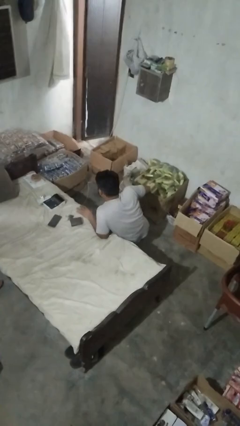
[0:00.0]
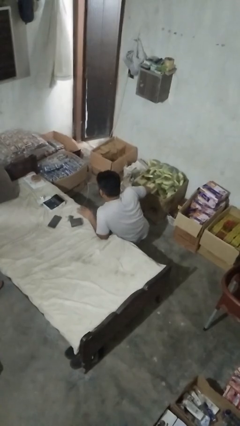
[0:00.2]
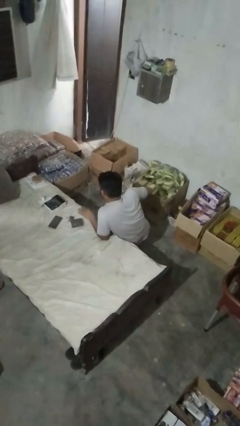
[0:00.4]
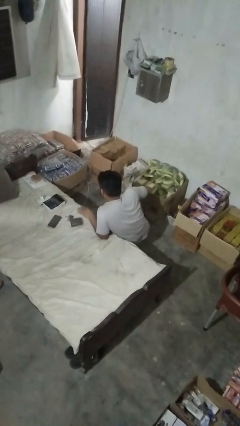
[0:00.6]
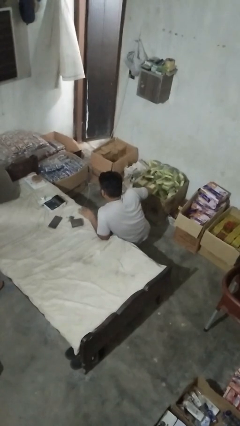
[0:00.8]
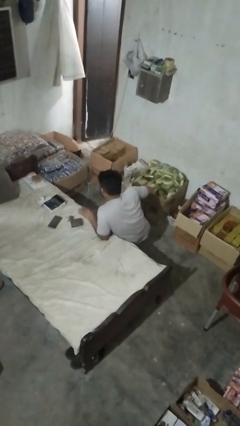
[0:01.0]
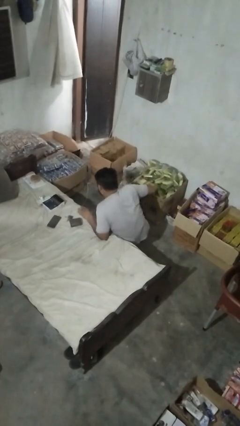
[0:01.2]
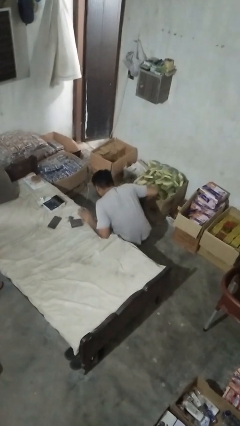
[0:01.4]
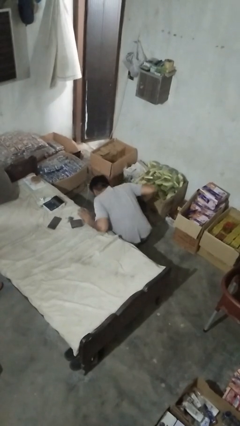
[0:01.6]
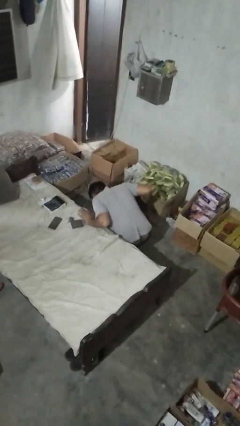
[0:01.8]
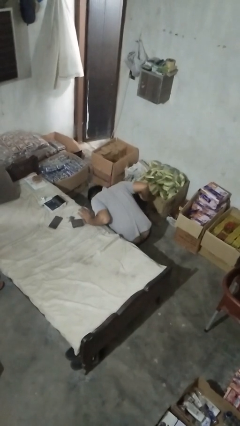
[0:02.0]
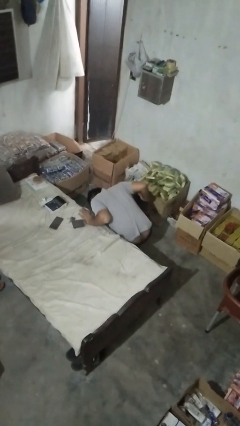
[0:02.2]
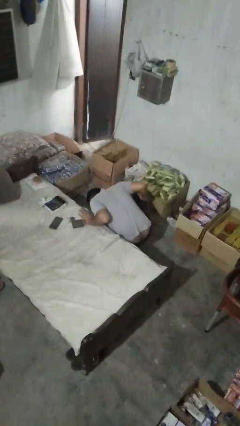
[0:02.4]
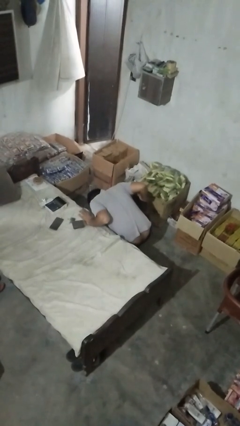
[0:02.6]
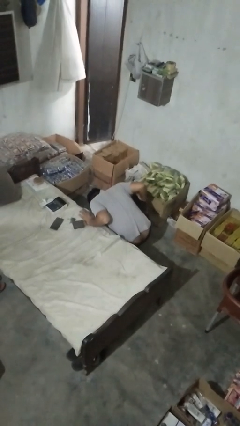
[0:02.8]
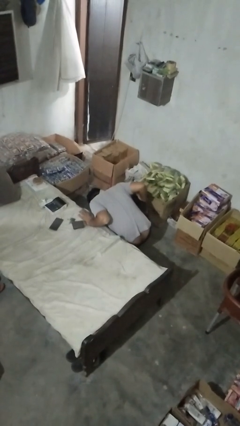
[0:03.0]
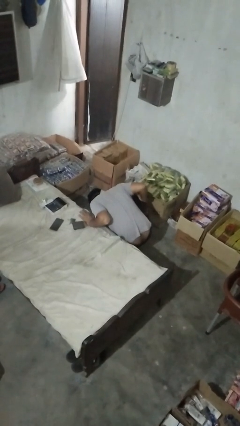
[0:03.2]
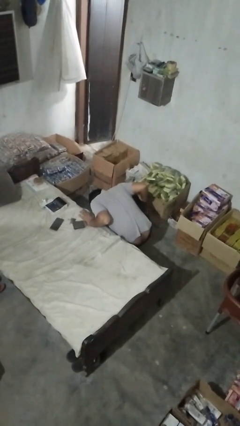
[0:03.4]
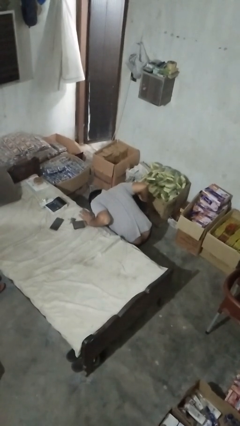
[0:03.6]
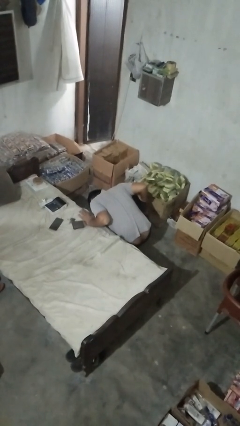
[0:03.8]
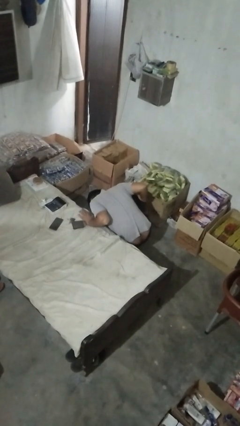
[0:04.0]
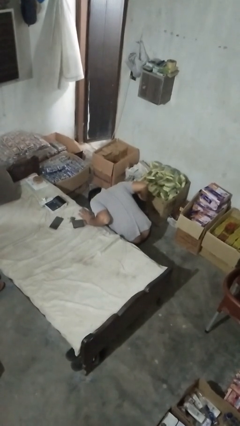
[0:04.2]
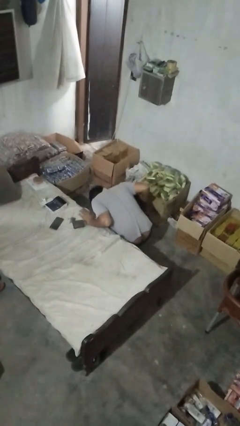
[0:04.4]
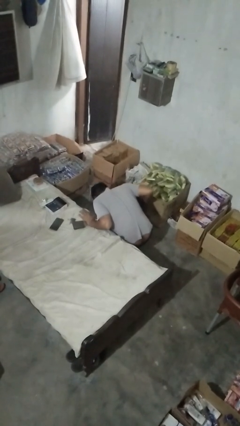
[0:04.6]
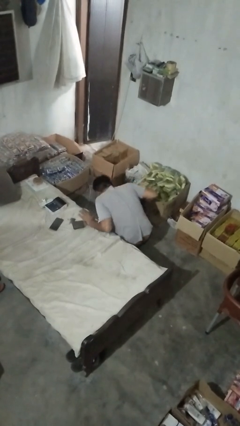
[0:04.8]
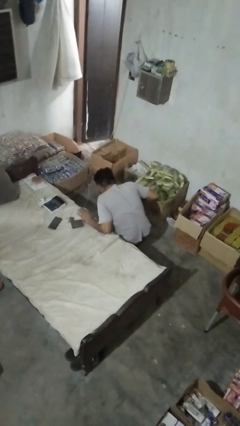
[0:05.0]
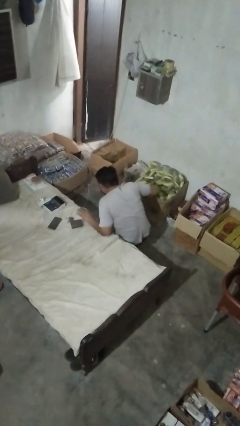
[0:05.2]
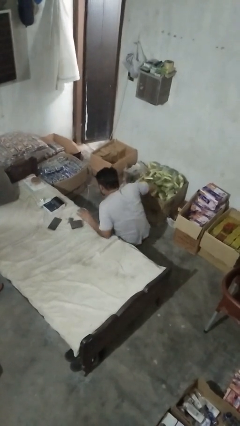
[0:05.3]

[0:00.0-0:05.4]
person searches under couch

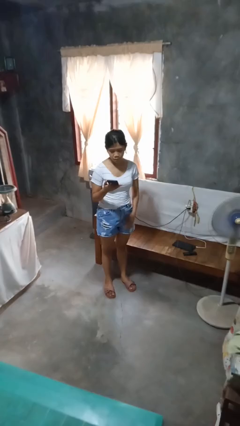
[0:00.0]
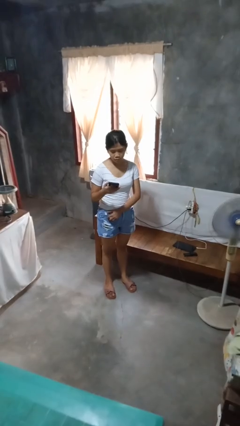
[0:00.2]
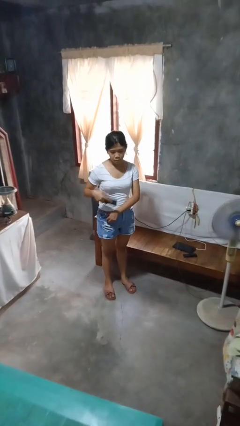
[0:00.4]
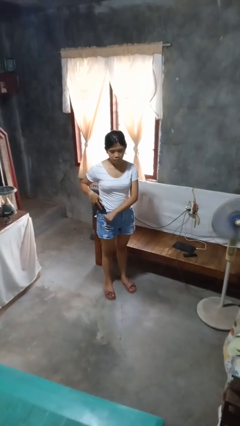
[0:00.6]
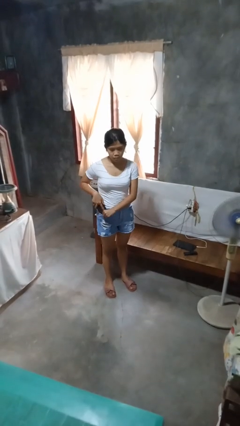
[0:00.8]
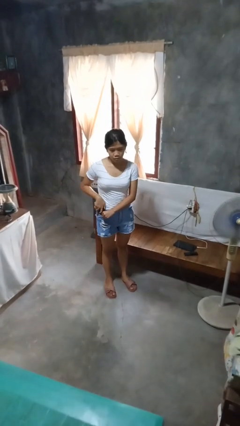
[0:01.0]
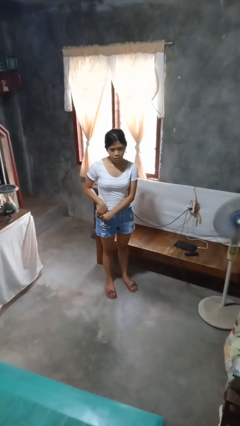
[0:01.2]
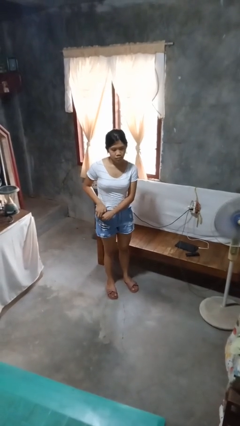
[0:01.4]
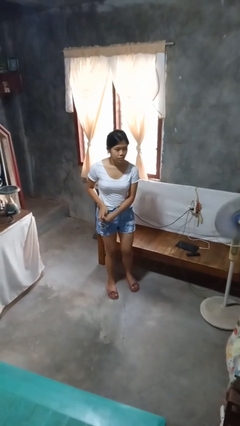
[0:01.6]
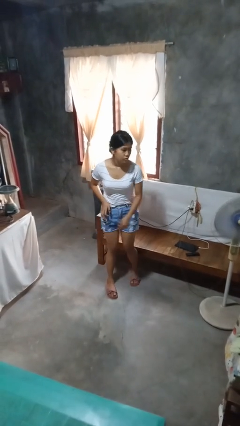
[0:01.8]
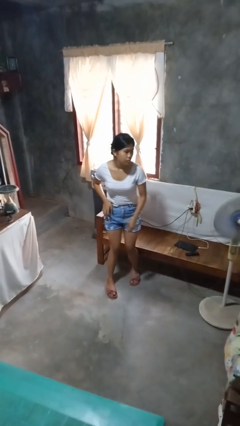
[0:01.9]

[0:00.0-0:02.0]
person puts phone into pocket

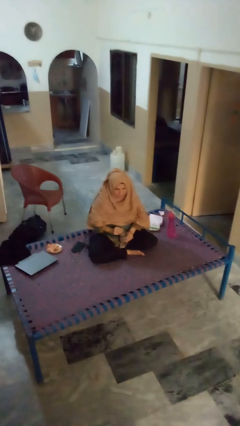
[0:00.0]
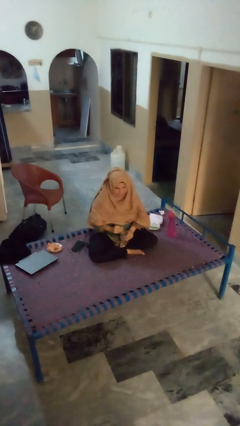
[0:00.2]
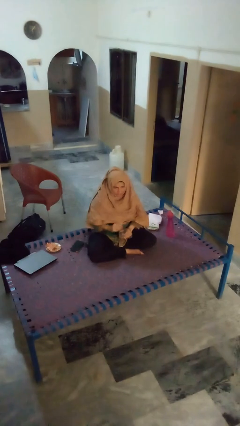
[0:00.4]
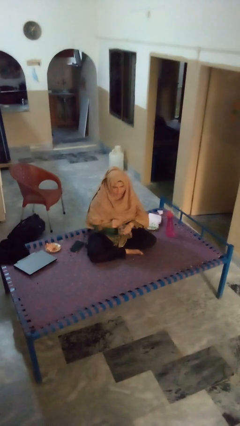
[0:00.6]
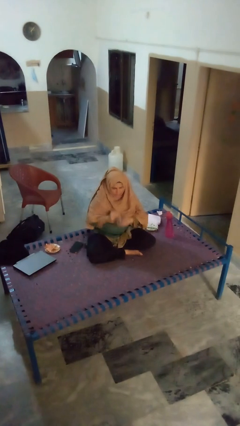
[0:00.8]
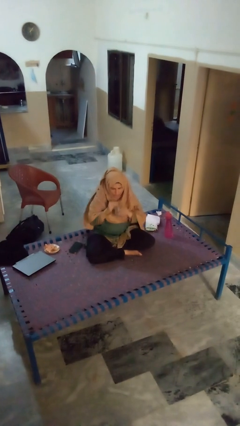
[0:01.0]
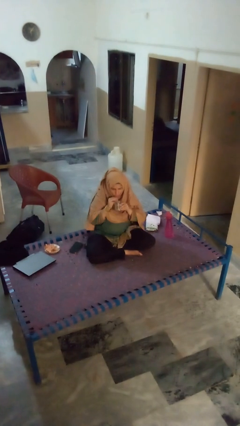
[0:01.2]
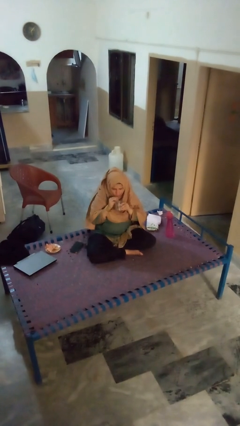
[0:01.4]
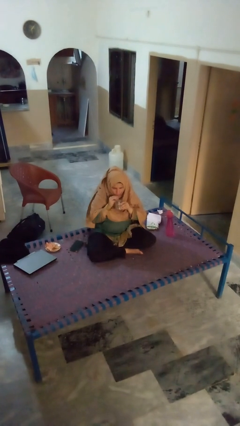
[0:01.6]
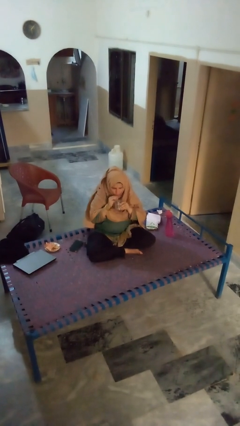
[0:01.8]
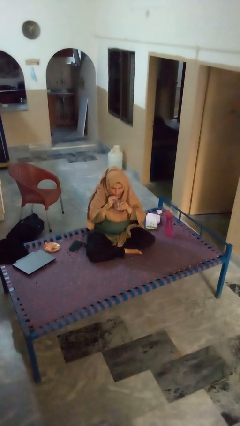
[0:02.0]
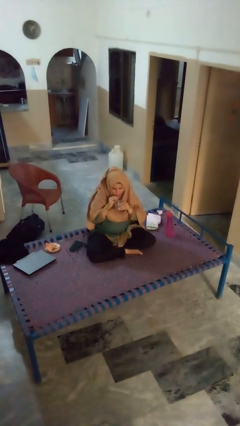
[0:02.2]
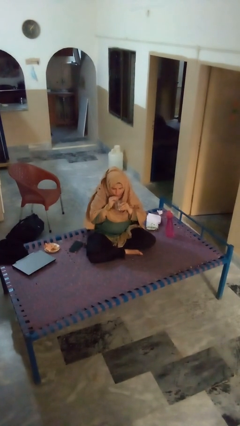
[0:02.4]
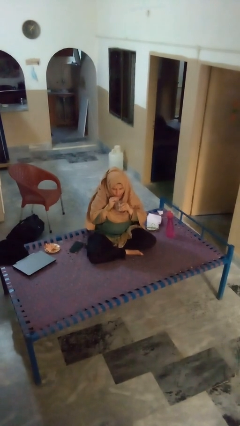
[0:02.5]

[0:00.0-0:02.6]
person drinks from straw

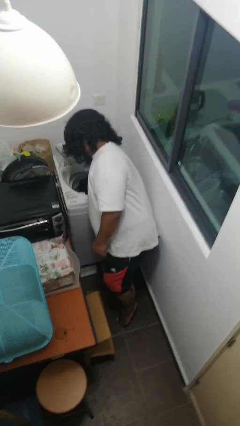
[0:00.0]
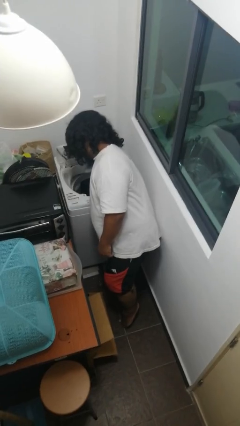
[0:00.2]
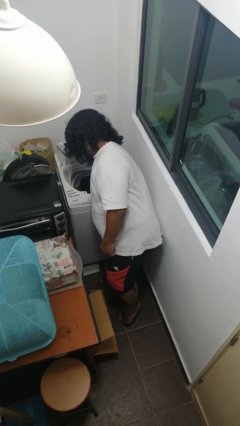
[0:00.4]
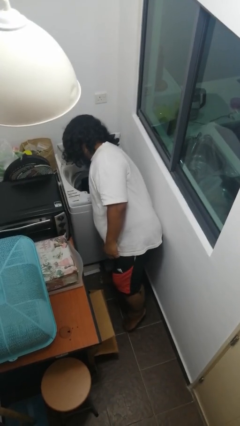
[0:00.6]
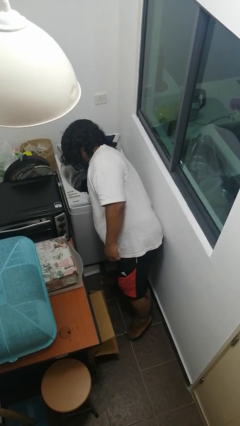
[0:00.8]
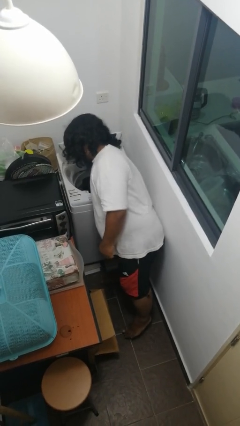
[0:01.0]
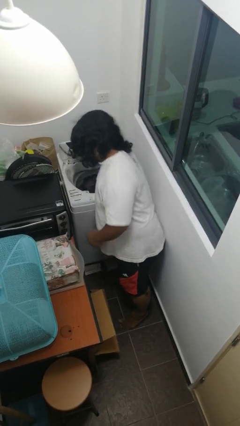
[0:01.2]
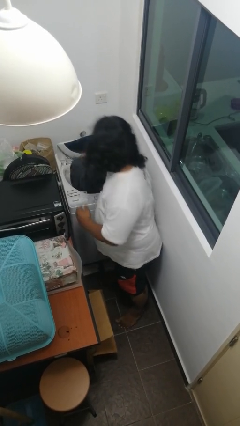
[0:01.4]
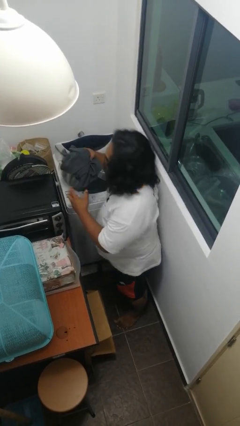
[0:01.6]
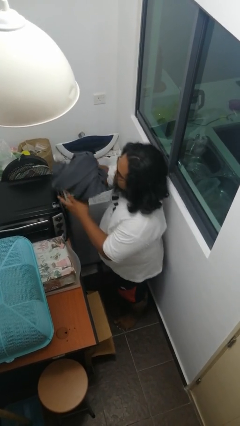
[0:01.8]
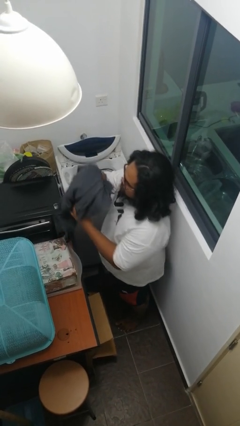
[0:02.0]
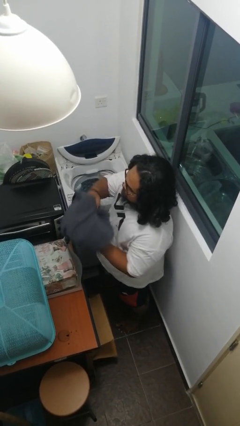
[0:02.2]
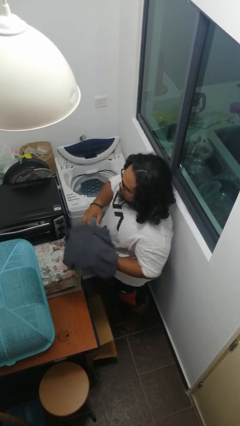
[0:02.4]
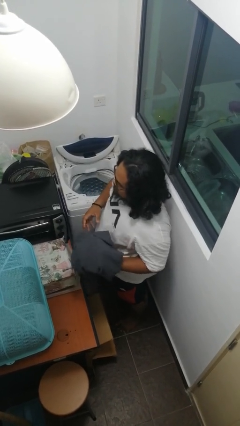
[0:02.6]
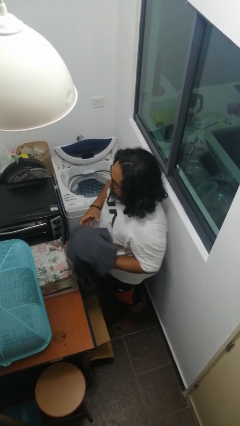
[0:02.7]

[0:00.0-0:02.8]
person unloads clotheswasher

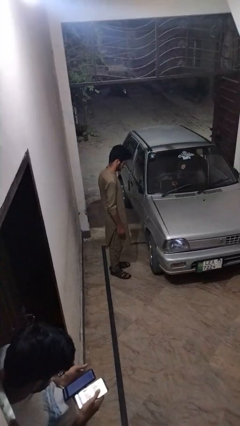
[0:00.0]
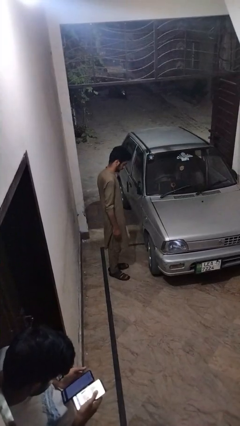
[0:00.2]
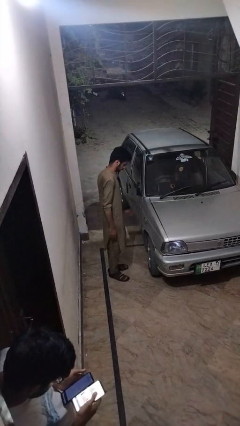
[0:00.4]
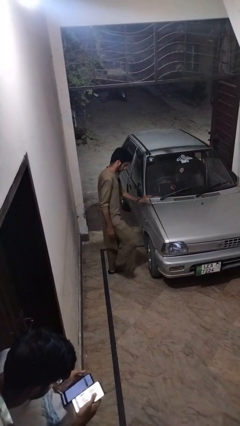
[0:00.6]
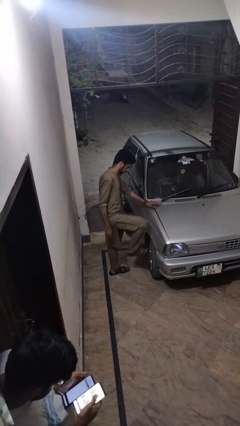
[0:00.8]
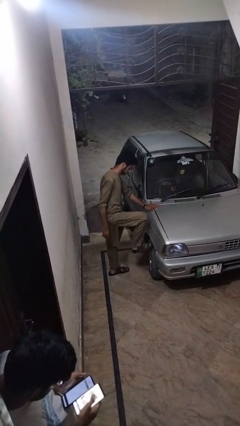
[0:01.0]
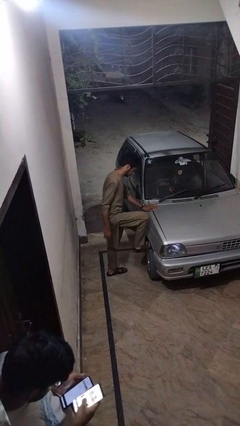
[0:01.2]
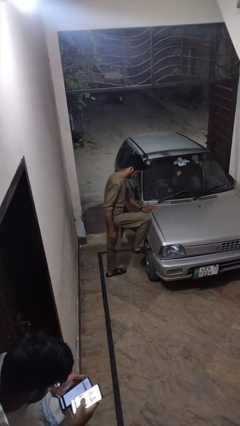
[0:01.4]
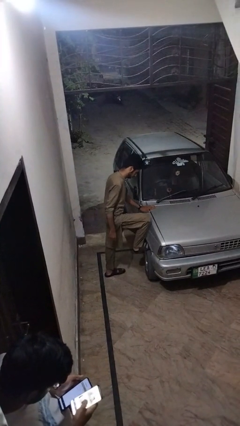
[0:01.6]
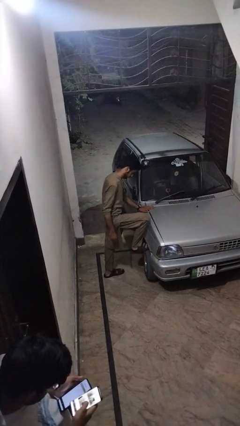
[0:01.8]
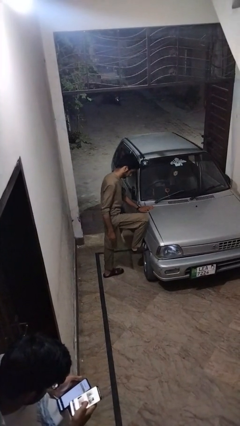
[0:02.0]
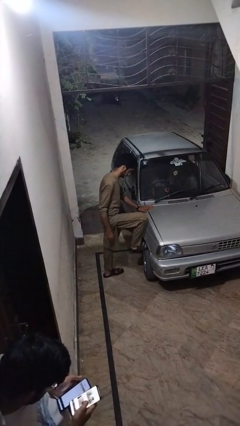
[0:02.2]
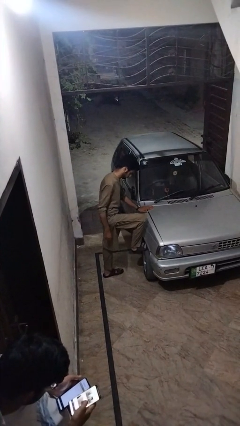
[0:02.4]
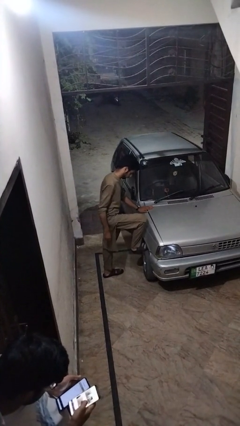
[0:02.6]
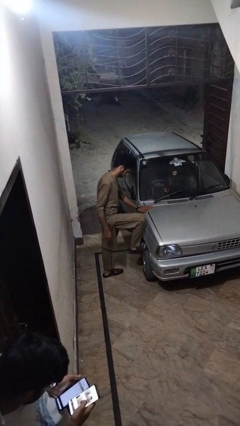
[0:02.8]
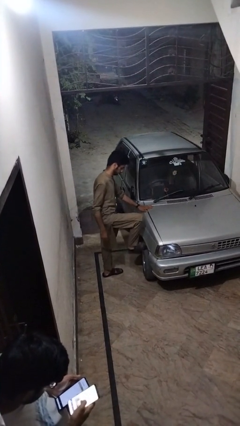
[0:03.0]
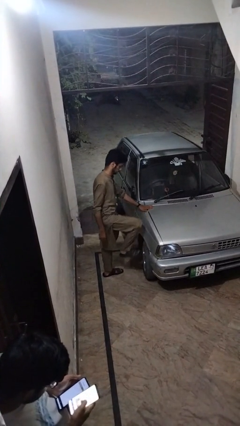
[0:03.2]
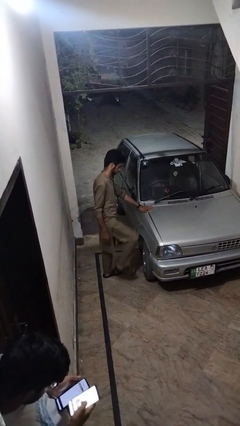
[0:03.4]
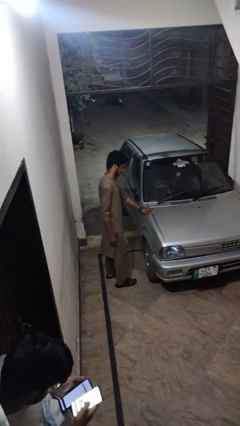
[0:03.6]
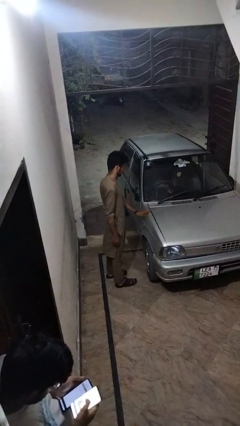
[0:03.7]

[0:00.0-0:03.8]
person kicks car tires

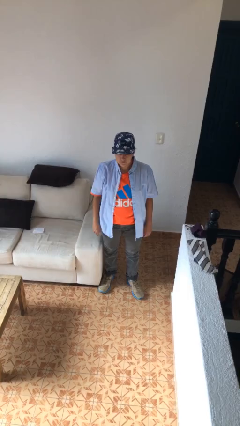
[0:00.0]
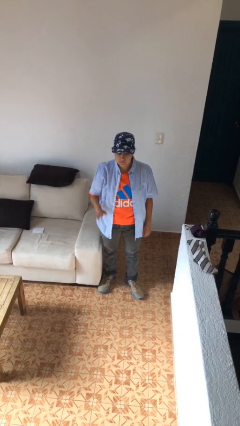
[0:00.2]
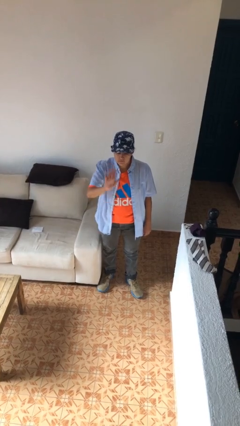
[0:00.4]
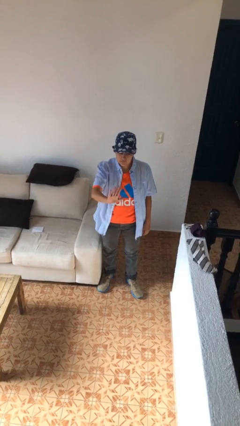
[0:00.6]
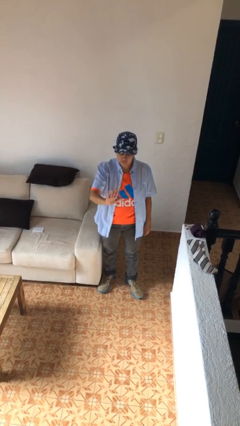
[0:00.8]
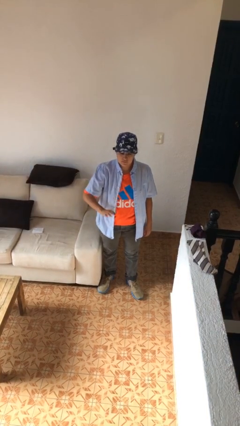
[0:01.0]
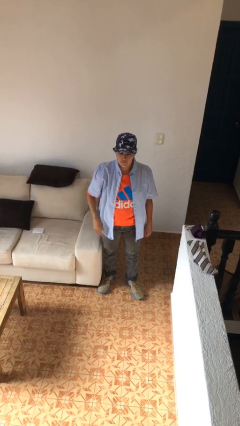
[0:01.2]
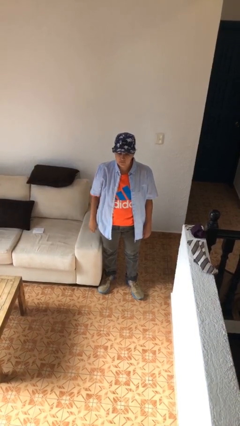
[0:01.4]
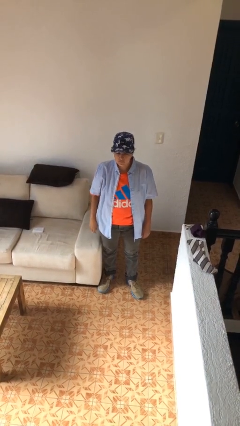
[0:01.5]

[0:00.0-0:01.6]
person gestures stop
